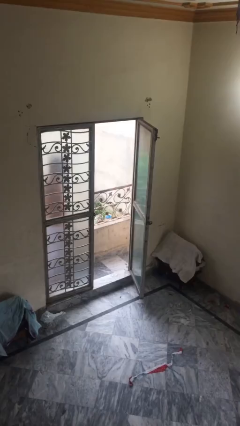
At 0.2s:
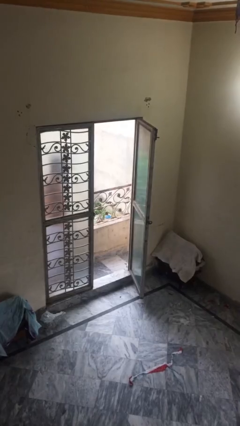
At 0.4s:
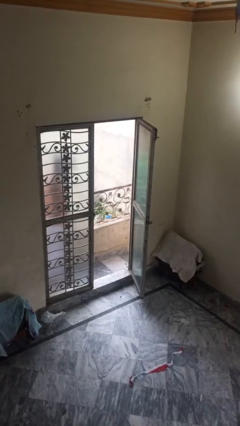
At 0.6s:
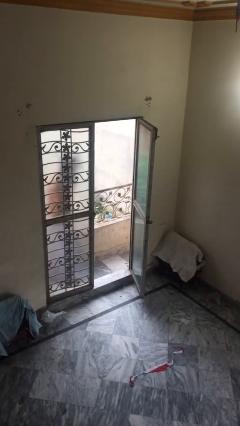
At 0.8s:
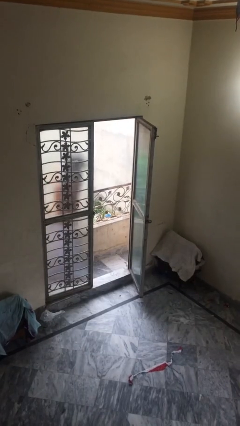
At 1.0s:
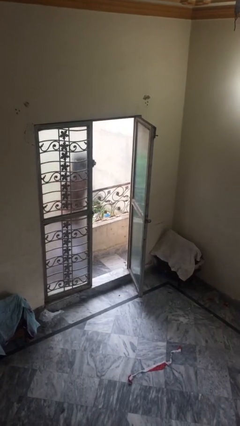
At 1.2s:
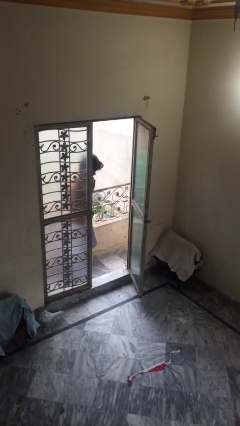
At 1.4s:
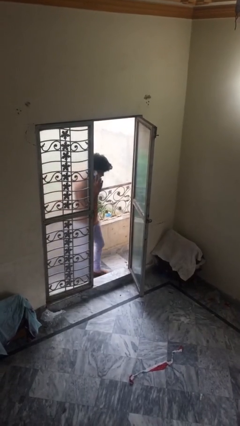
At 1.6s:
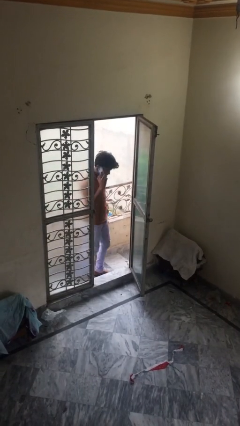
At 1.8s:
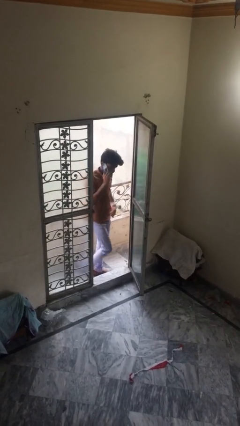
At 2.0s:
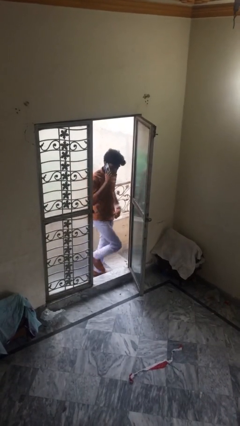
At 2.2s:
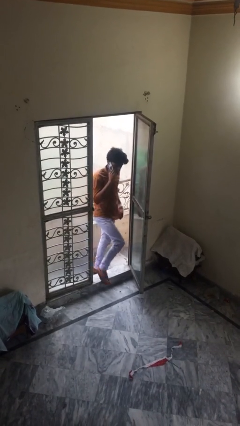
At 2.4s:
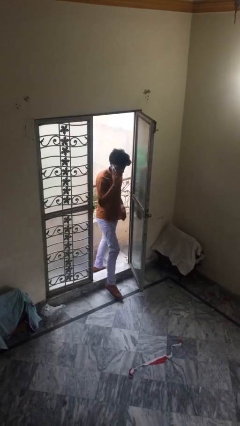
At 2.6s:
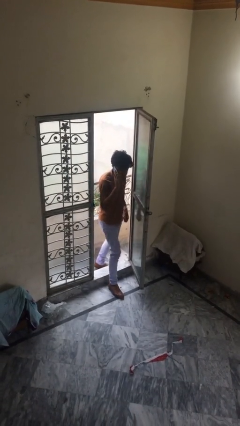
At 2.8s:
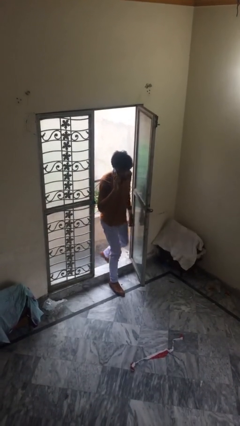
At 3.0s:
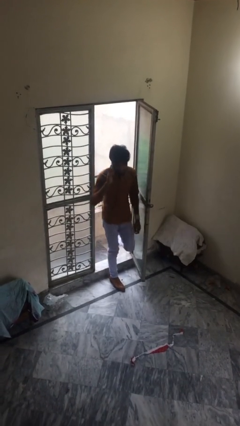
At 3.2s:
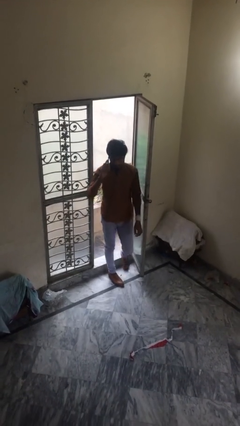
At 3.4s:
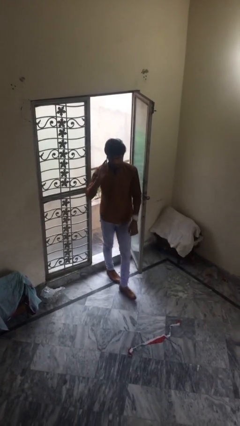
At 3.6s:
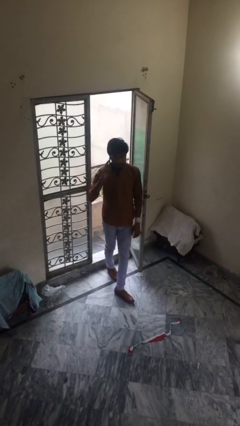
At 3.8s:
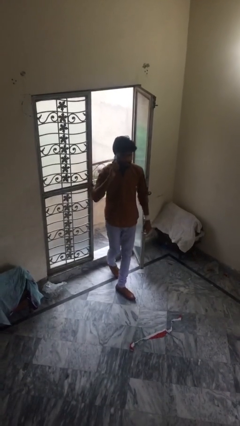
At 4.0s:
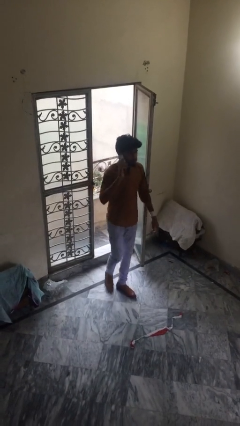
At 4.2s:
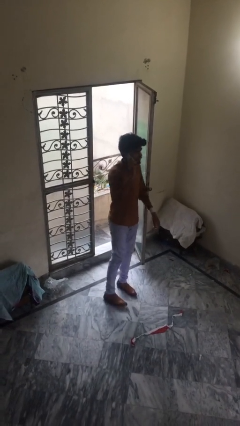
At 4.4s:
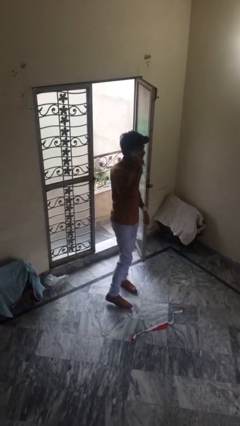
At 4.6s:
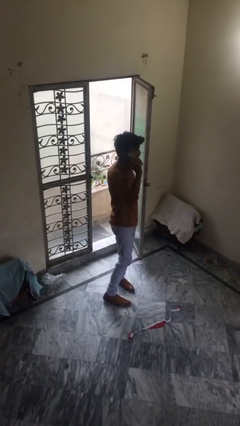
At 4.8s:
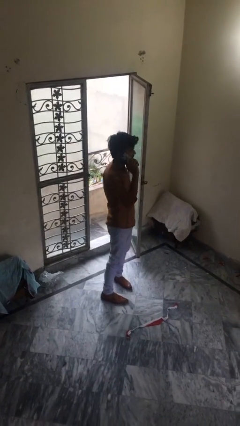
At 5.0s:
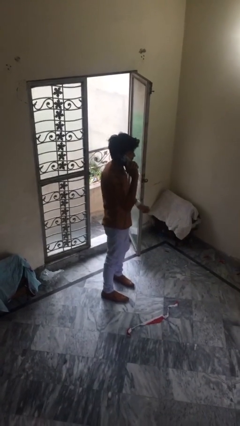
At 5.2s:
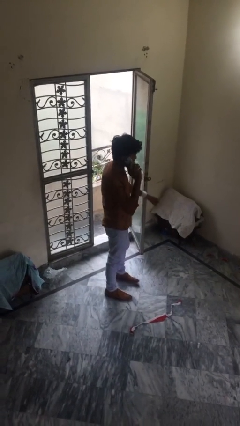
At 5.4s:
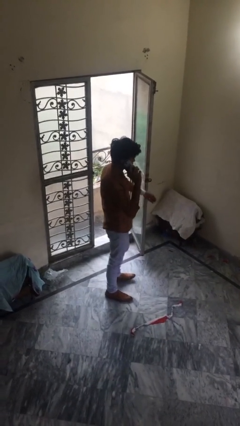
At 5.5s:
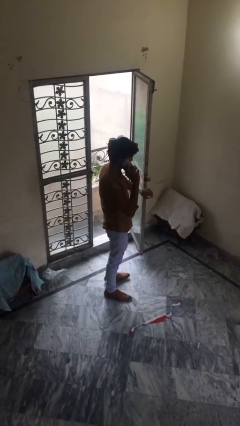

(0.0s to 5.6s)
person enters scene through structure

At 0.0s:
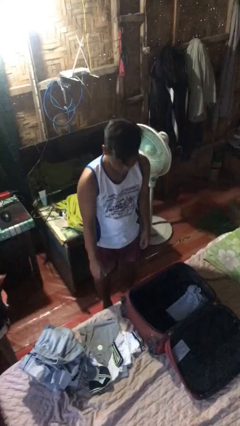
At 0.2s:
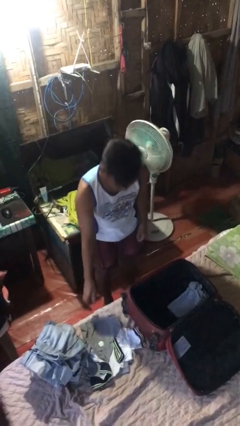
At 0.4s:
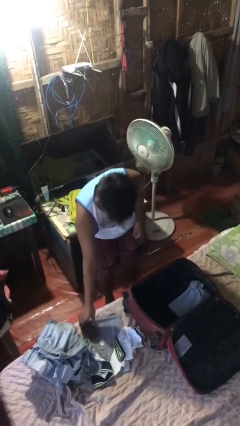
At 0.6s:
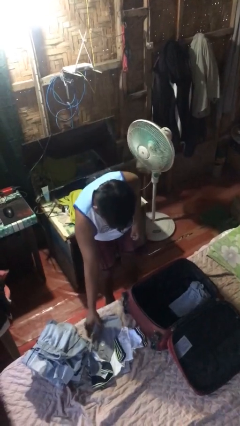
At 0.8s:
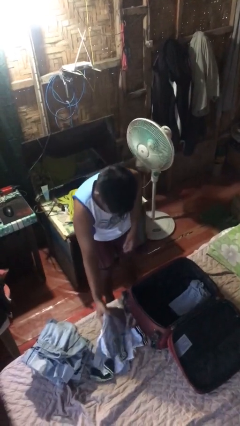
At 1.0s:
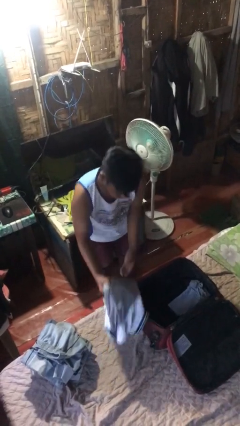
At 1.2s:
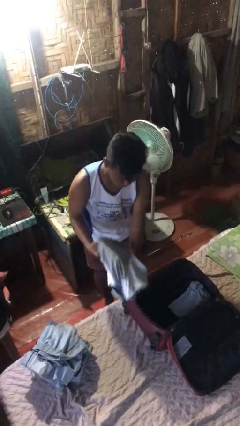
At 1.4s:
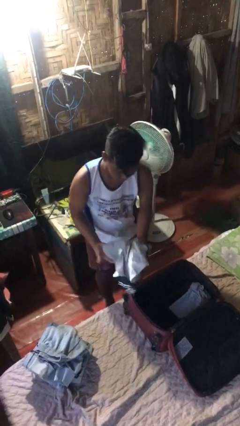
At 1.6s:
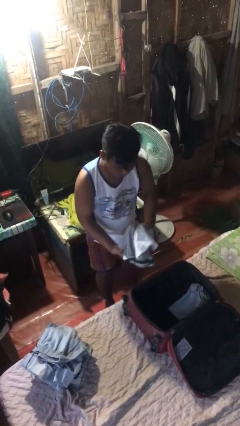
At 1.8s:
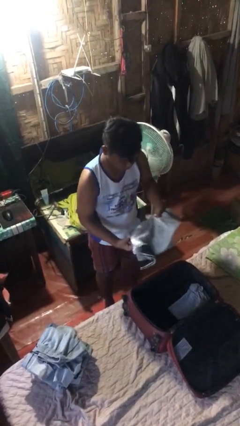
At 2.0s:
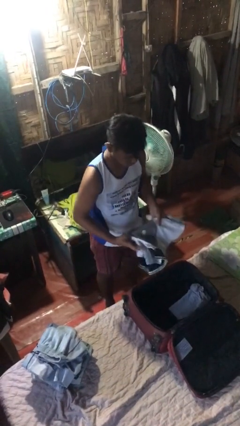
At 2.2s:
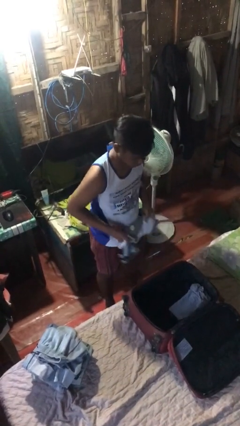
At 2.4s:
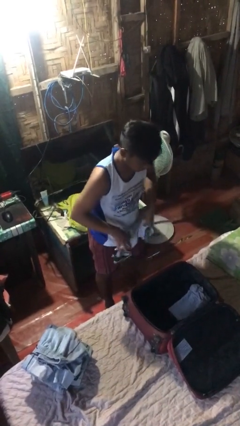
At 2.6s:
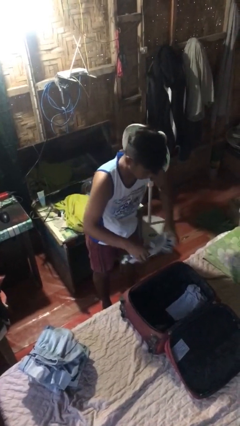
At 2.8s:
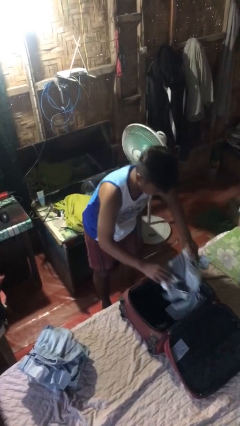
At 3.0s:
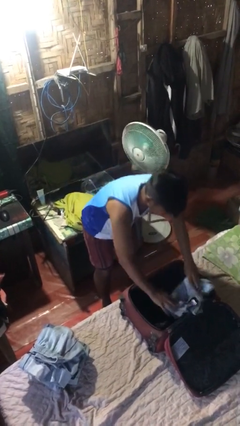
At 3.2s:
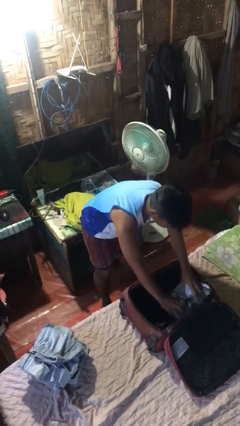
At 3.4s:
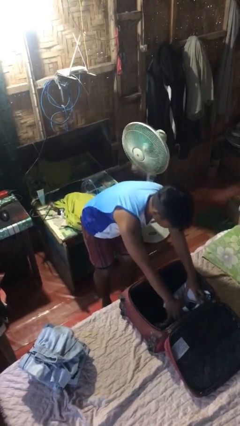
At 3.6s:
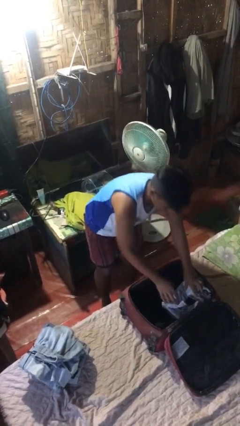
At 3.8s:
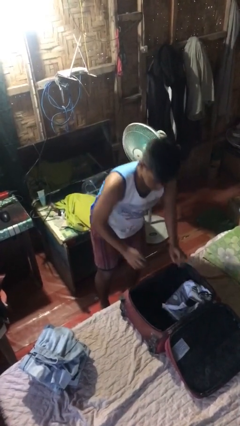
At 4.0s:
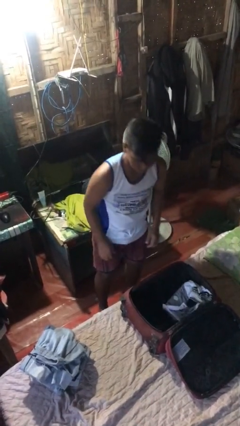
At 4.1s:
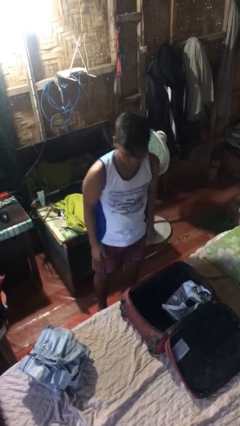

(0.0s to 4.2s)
person loads clothes into suitcase

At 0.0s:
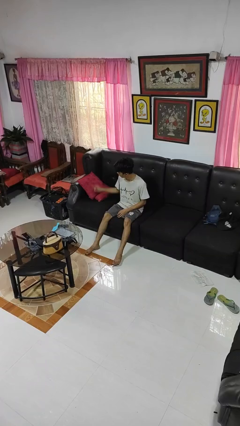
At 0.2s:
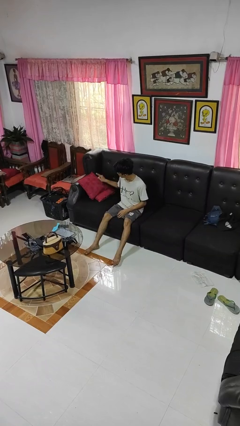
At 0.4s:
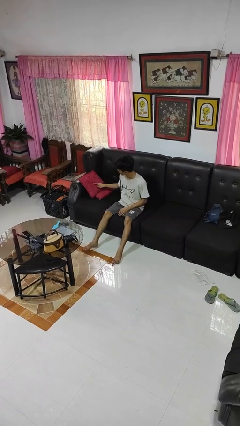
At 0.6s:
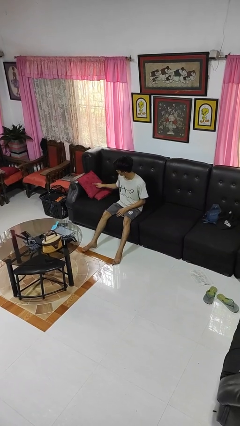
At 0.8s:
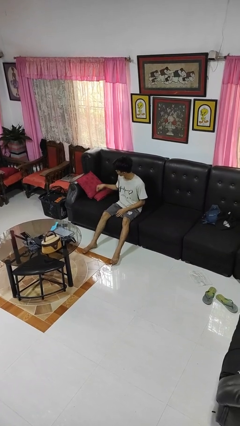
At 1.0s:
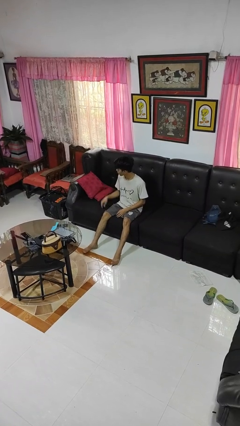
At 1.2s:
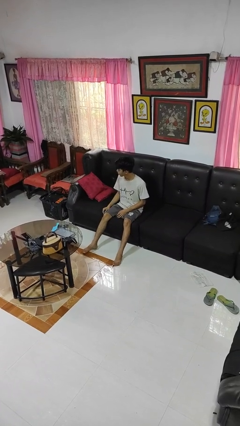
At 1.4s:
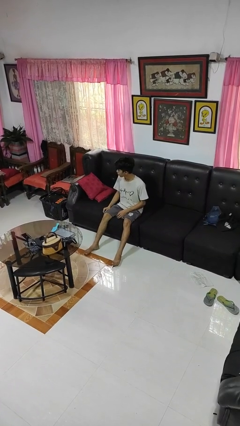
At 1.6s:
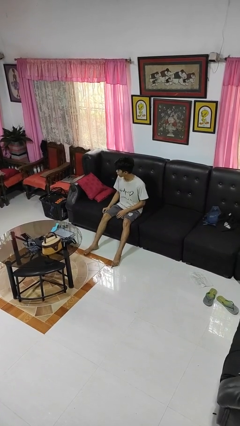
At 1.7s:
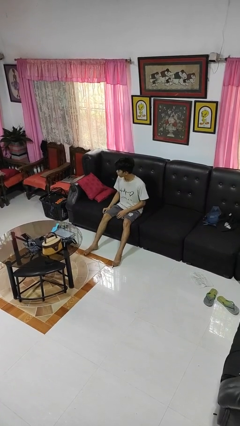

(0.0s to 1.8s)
person taps object with finger

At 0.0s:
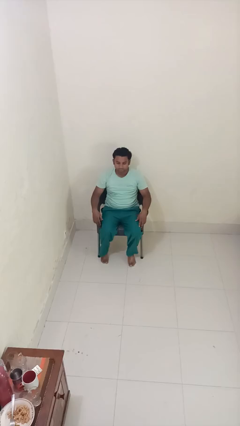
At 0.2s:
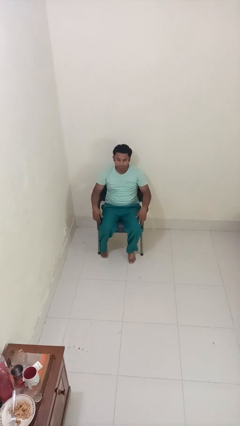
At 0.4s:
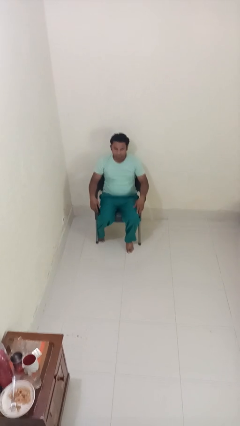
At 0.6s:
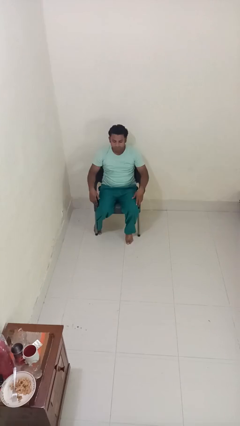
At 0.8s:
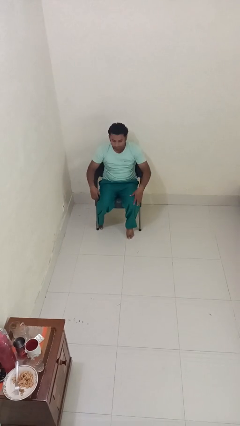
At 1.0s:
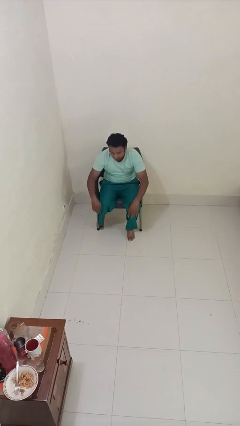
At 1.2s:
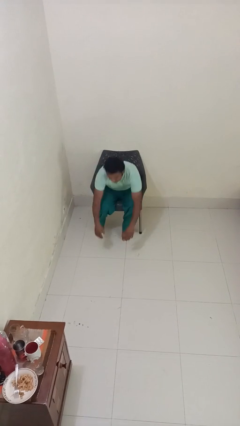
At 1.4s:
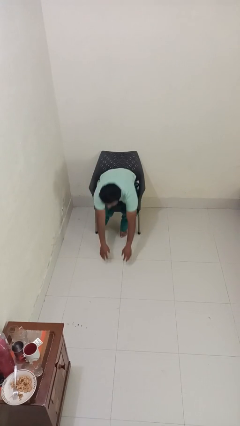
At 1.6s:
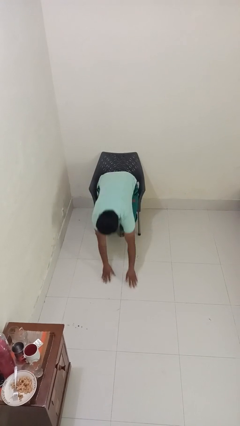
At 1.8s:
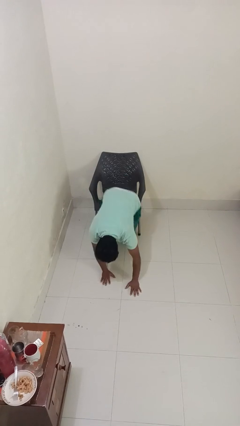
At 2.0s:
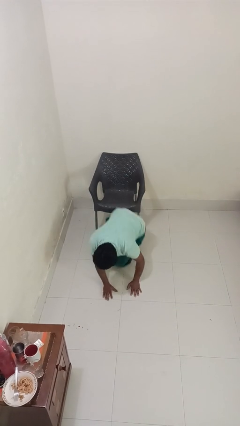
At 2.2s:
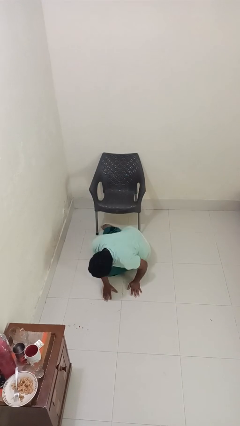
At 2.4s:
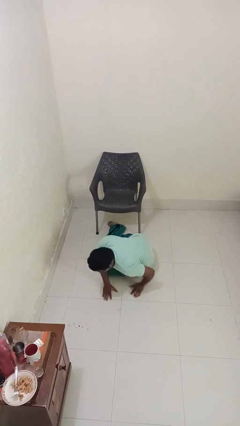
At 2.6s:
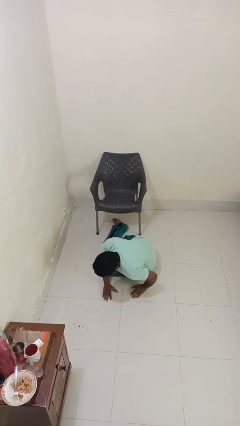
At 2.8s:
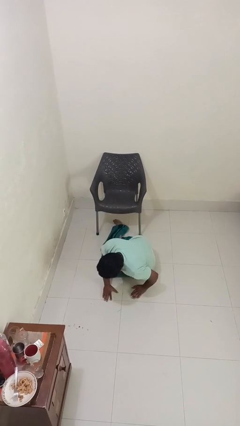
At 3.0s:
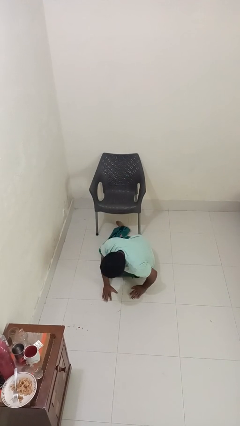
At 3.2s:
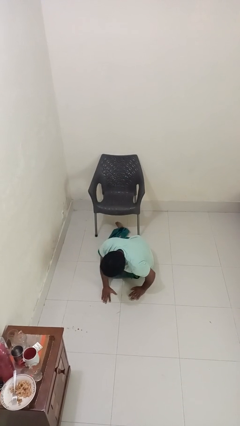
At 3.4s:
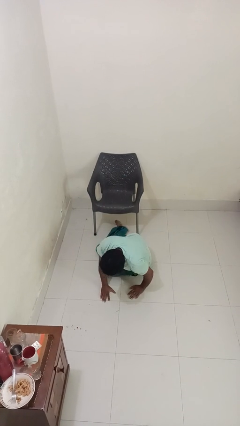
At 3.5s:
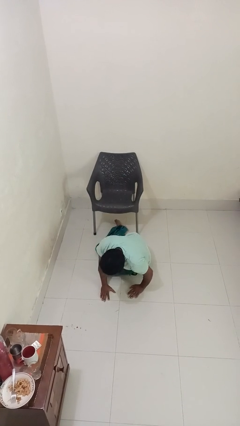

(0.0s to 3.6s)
person falls from chair

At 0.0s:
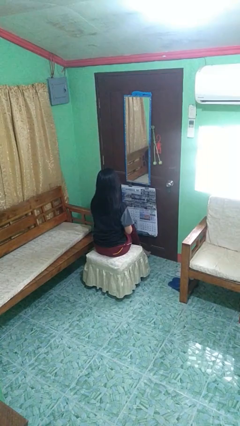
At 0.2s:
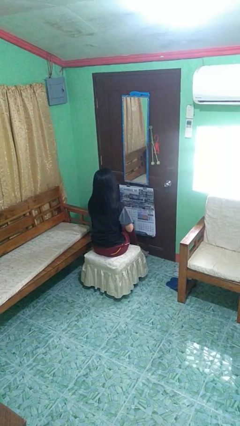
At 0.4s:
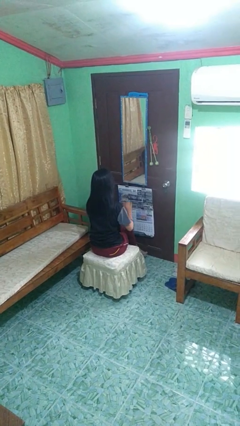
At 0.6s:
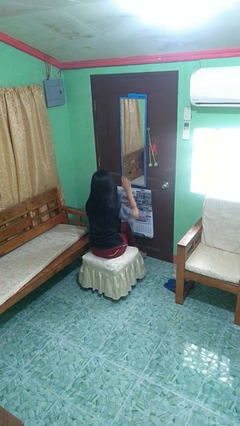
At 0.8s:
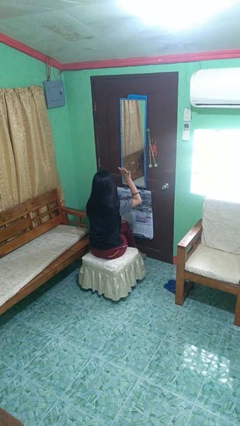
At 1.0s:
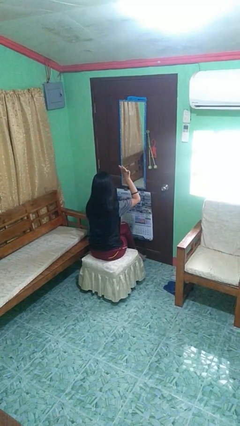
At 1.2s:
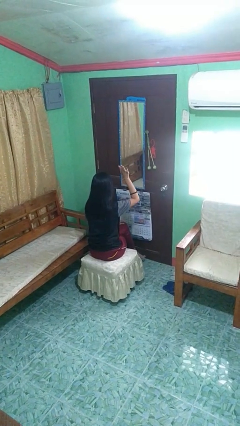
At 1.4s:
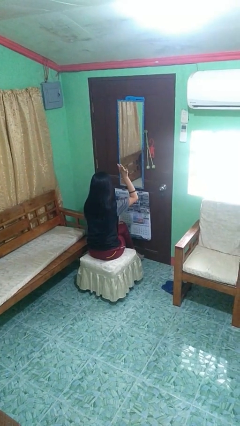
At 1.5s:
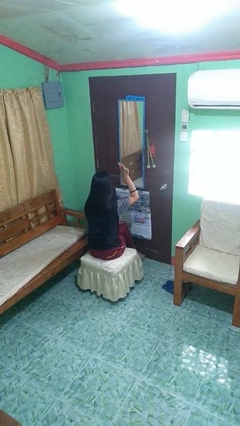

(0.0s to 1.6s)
person gestures raise hand

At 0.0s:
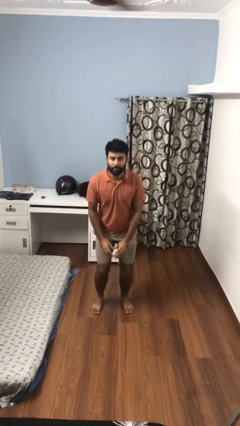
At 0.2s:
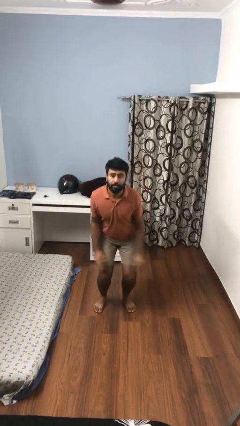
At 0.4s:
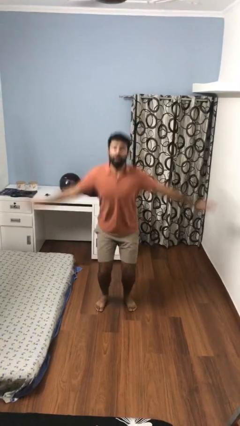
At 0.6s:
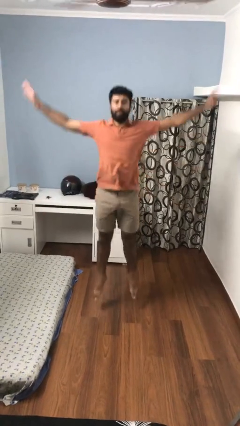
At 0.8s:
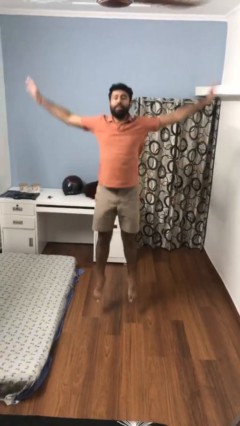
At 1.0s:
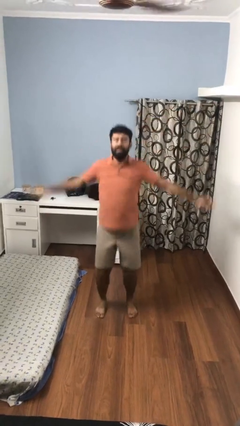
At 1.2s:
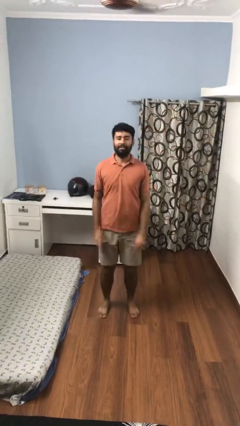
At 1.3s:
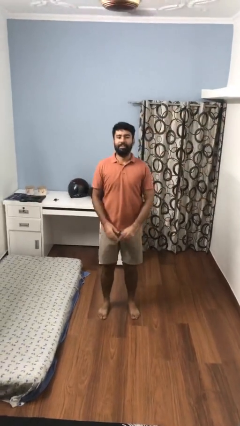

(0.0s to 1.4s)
person exercises with jumping jacks
